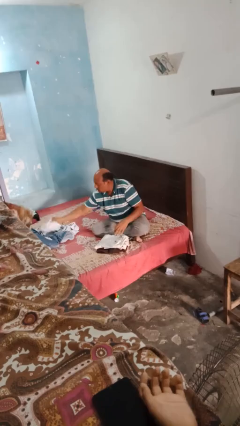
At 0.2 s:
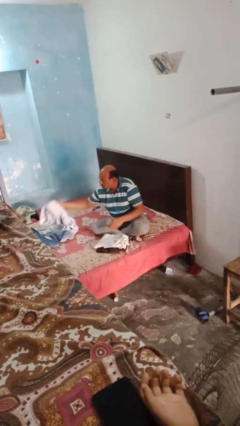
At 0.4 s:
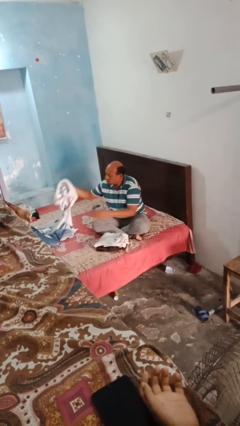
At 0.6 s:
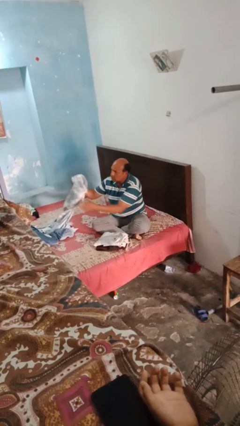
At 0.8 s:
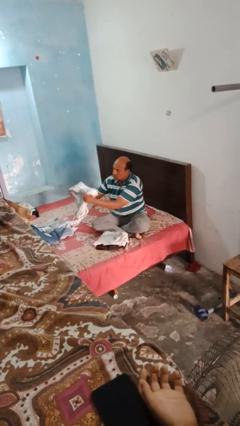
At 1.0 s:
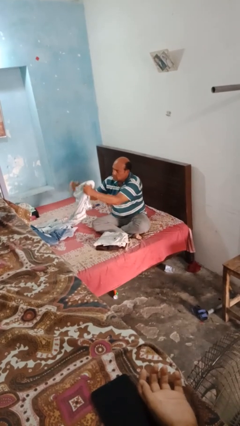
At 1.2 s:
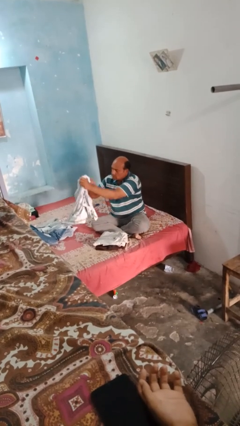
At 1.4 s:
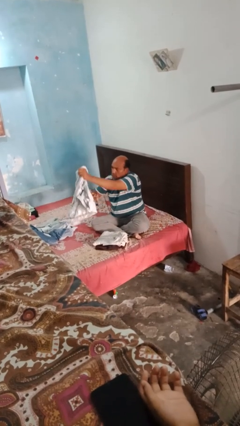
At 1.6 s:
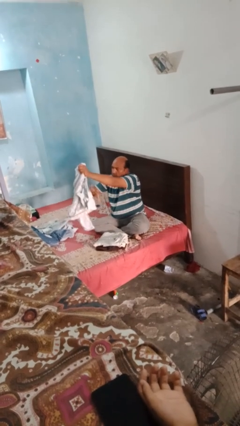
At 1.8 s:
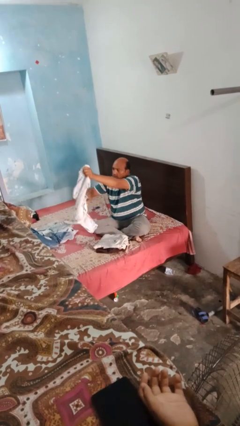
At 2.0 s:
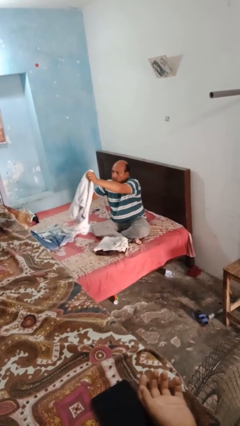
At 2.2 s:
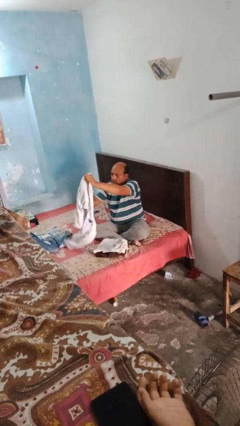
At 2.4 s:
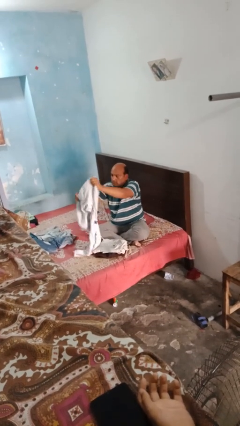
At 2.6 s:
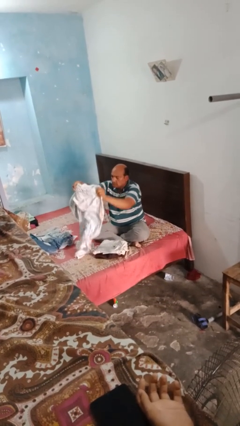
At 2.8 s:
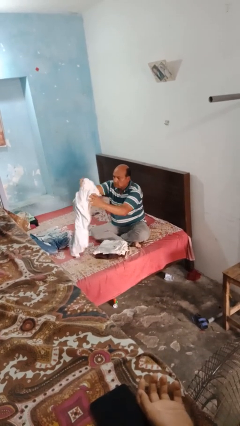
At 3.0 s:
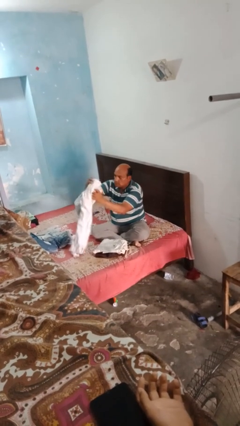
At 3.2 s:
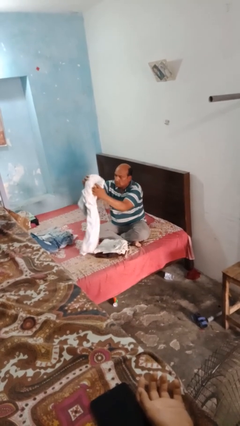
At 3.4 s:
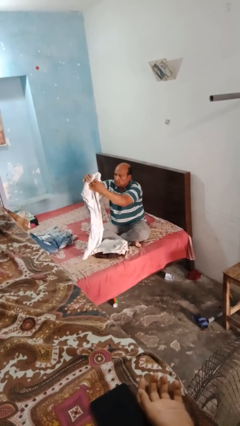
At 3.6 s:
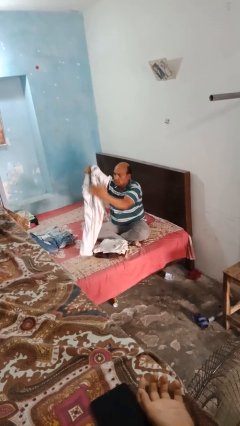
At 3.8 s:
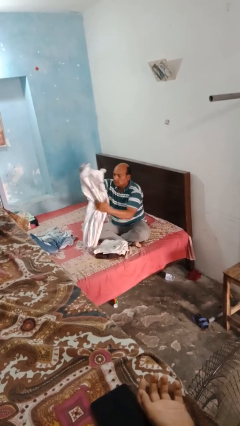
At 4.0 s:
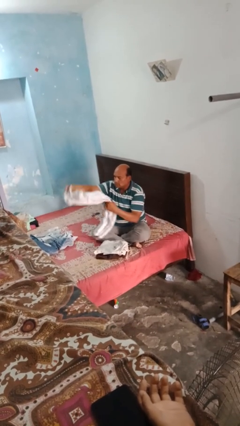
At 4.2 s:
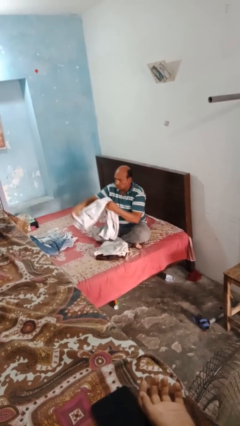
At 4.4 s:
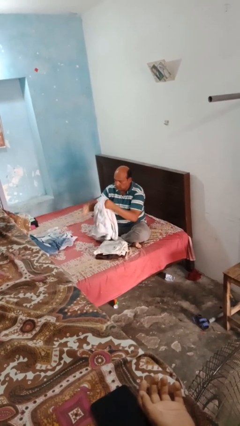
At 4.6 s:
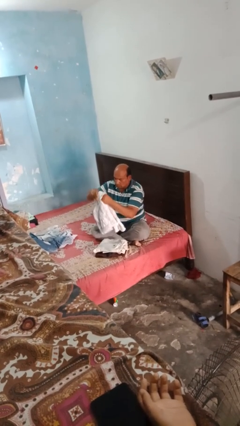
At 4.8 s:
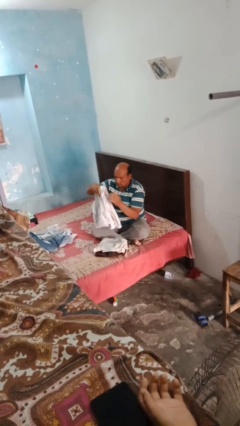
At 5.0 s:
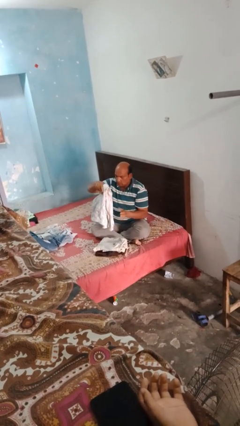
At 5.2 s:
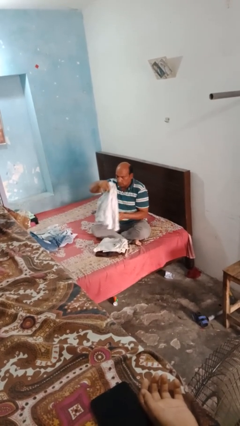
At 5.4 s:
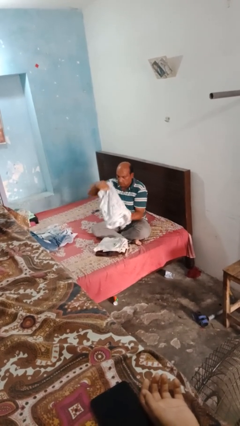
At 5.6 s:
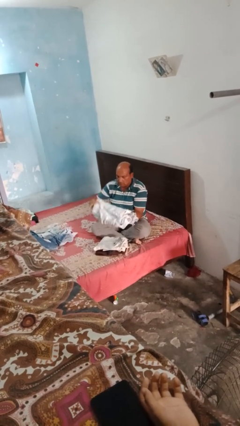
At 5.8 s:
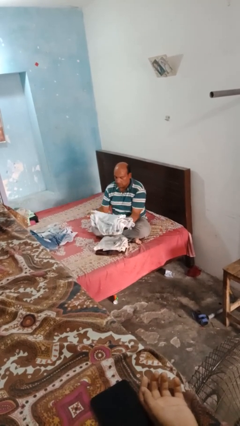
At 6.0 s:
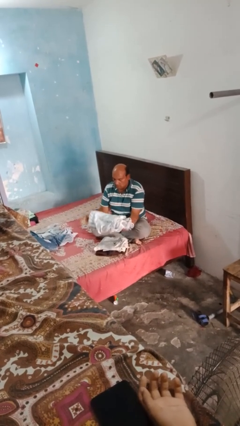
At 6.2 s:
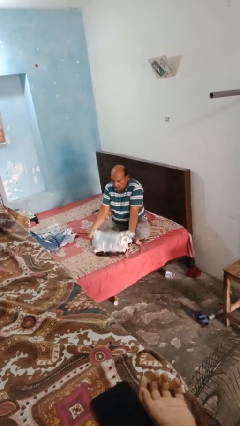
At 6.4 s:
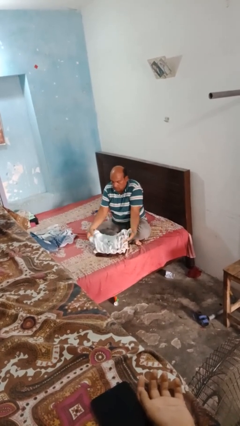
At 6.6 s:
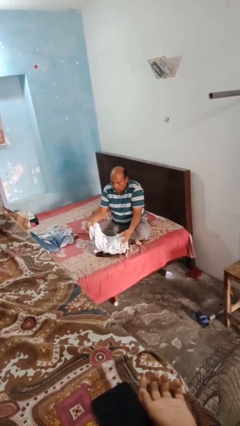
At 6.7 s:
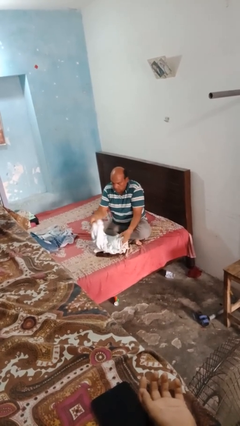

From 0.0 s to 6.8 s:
person folds pants

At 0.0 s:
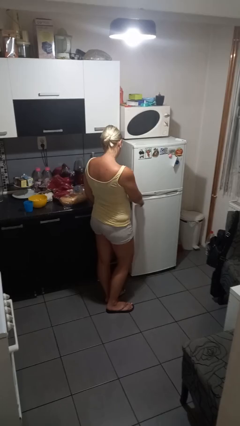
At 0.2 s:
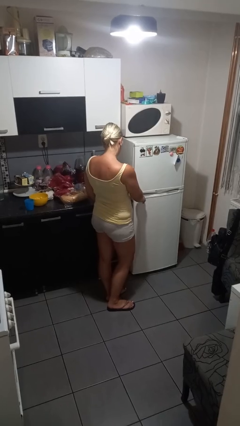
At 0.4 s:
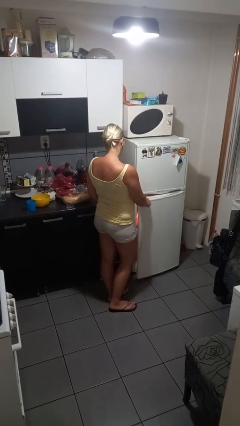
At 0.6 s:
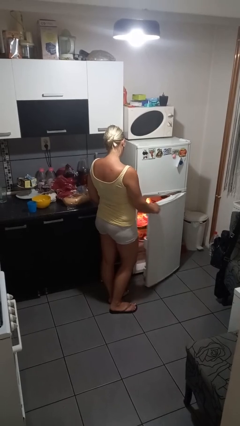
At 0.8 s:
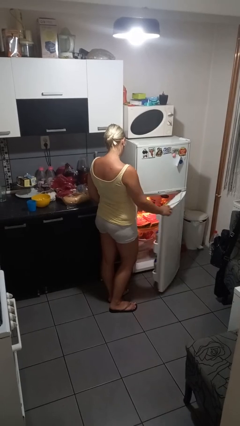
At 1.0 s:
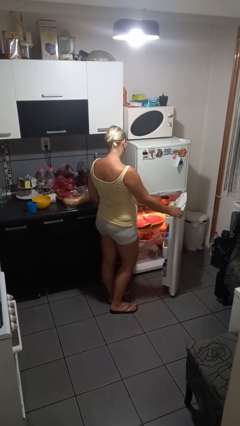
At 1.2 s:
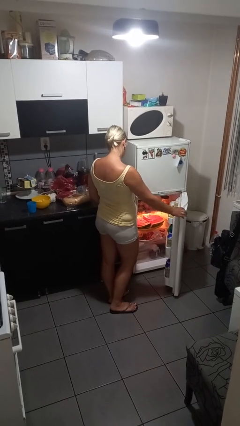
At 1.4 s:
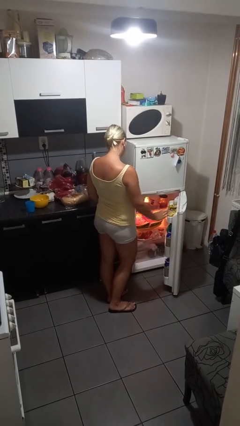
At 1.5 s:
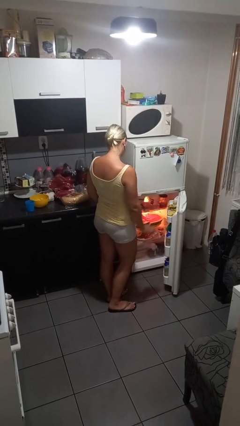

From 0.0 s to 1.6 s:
person opens refrigerator

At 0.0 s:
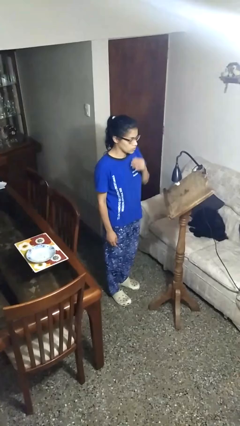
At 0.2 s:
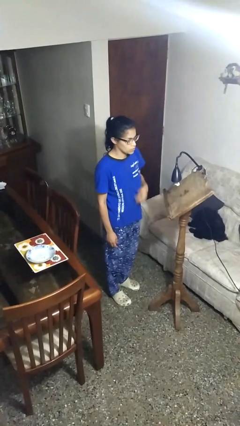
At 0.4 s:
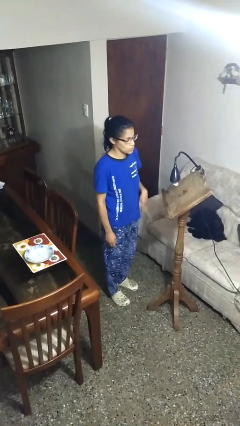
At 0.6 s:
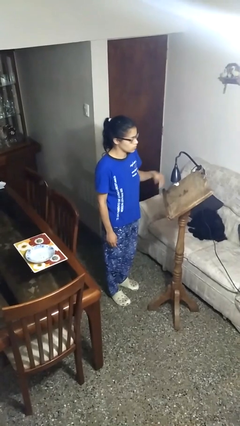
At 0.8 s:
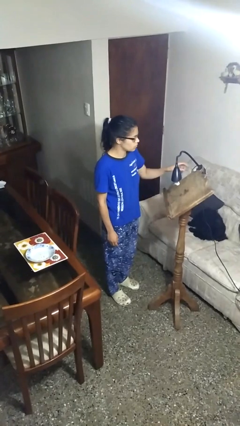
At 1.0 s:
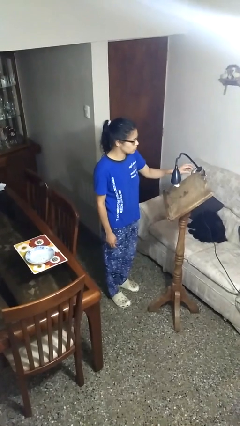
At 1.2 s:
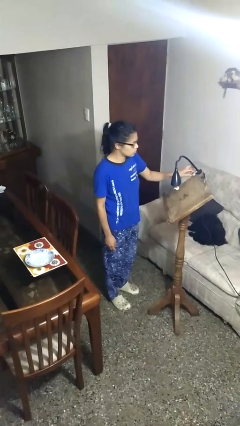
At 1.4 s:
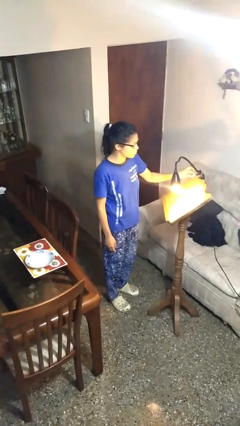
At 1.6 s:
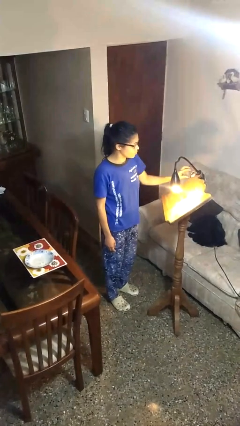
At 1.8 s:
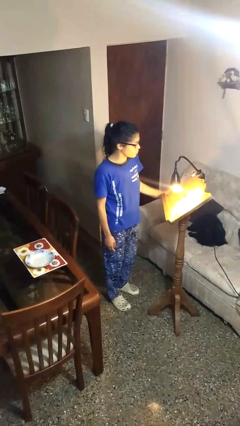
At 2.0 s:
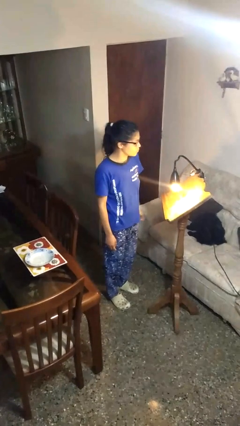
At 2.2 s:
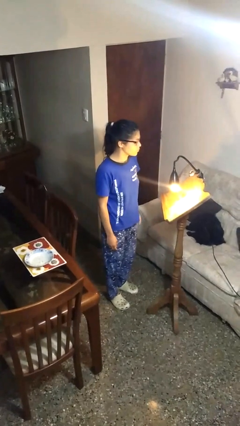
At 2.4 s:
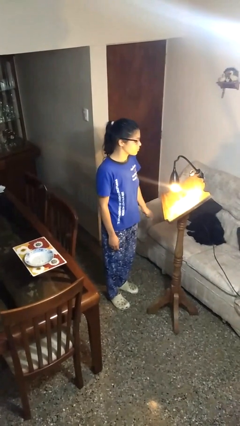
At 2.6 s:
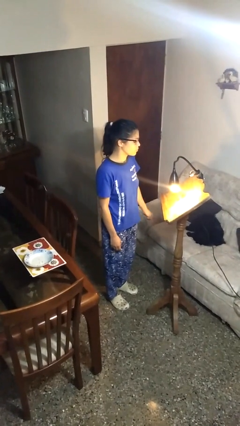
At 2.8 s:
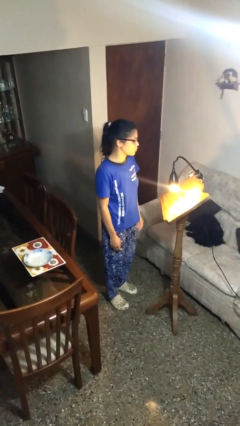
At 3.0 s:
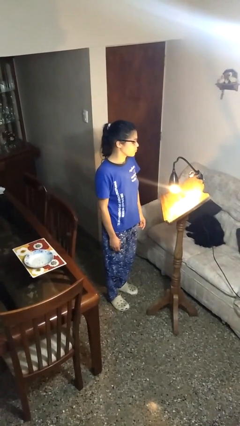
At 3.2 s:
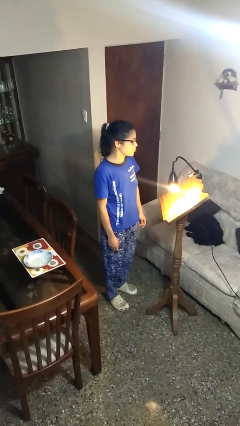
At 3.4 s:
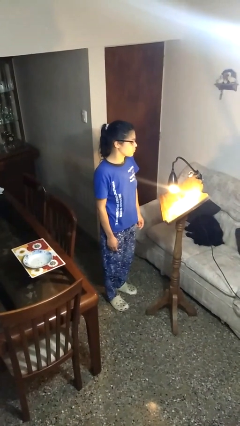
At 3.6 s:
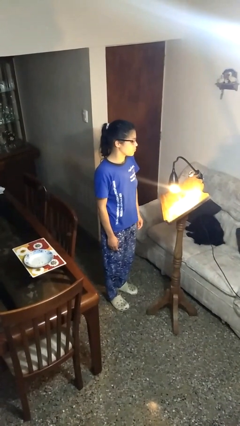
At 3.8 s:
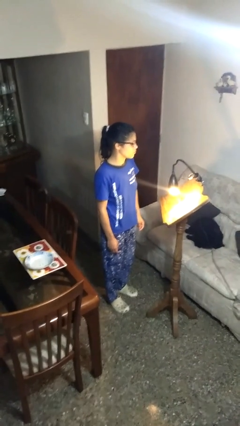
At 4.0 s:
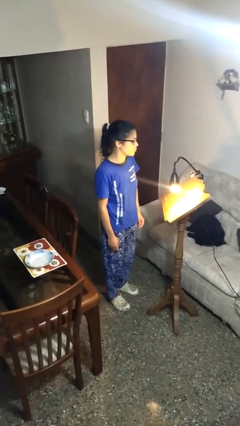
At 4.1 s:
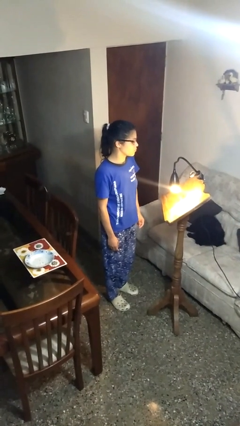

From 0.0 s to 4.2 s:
person turns on lamp

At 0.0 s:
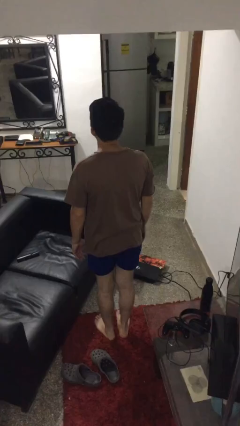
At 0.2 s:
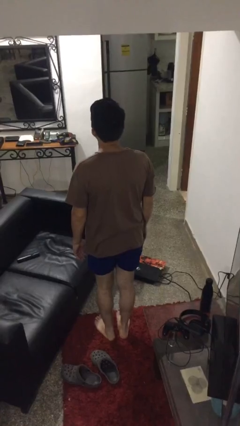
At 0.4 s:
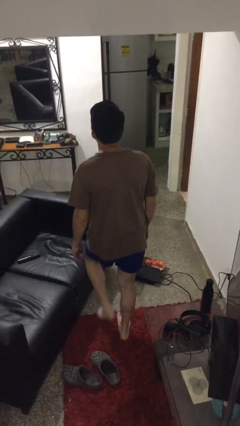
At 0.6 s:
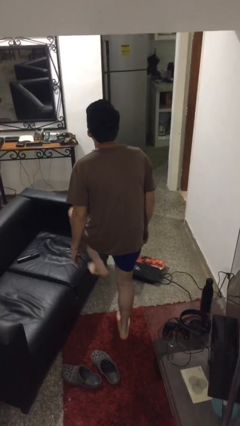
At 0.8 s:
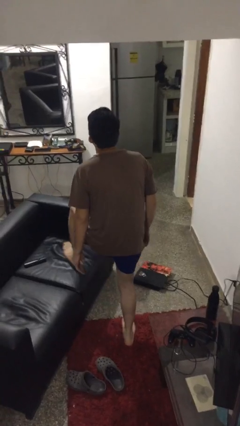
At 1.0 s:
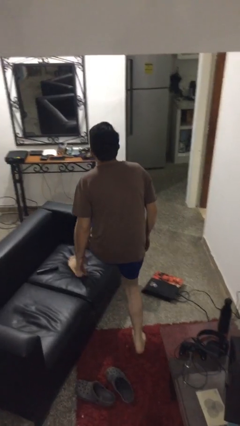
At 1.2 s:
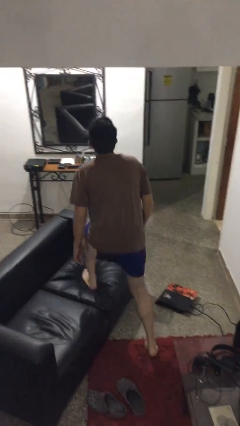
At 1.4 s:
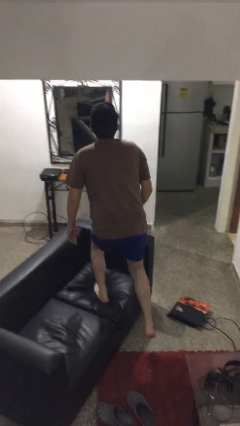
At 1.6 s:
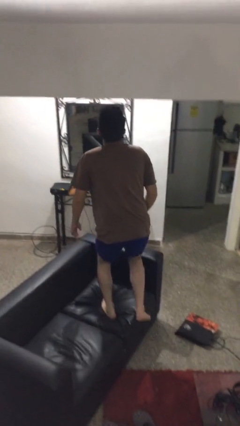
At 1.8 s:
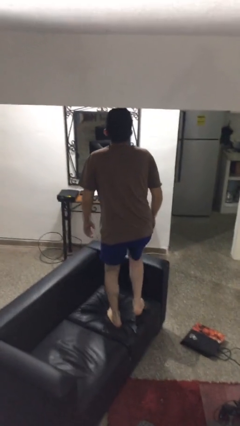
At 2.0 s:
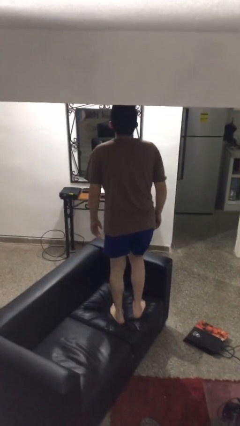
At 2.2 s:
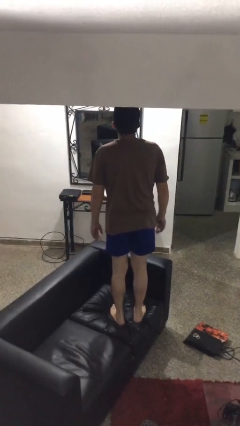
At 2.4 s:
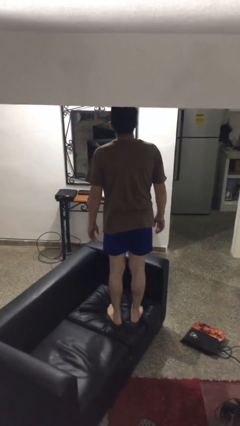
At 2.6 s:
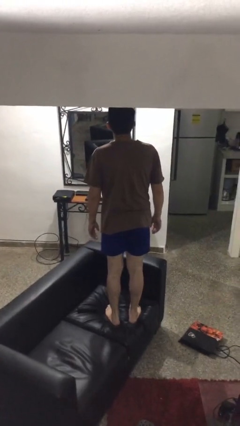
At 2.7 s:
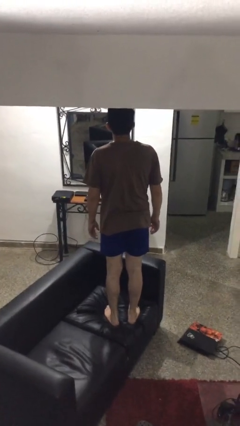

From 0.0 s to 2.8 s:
person climbs on couch

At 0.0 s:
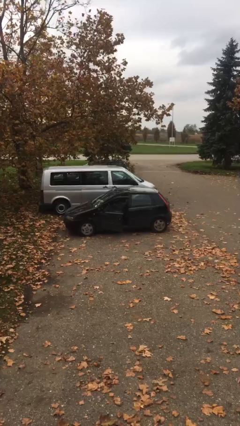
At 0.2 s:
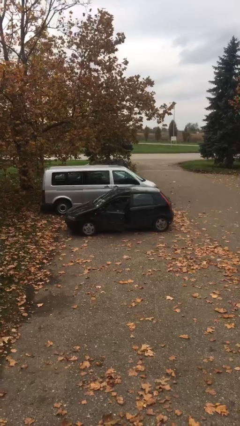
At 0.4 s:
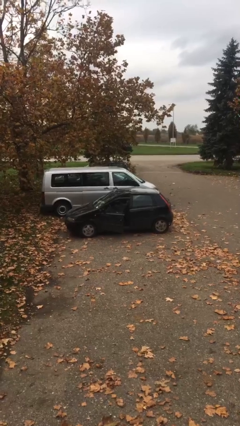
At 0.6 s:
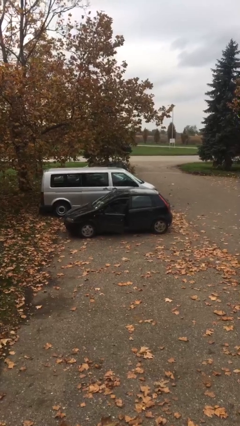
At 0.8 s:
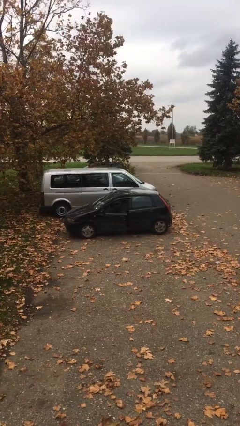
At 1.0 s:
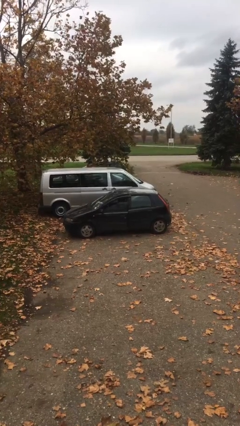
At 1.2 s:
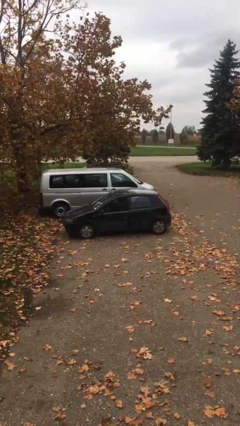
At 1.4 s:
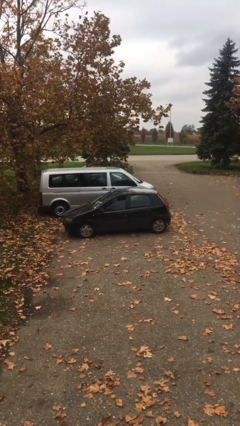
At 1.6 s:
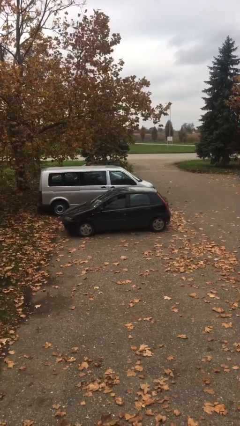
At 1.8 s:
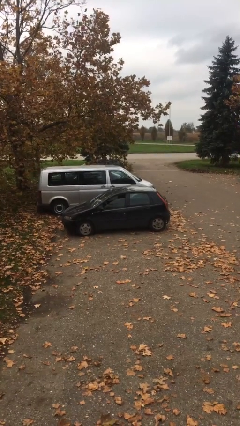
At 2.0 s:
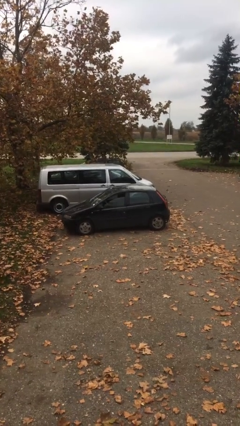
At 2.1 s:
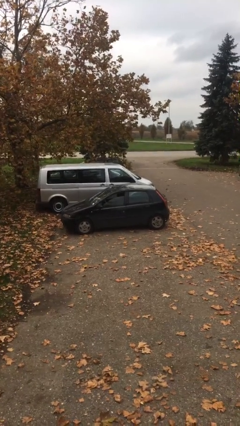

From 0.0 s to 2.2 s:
person closes car door

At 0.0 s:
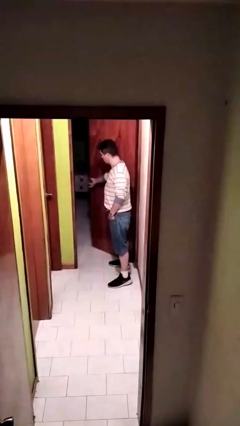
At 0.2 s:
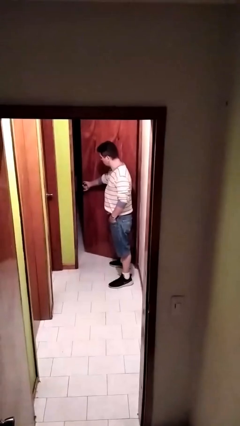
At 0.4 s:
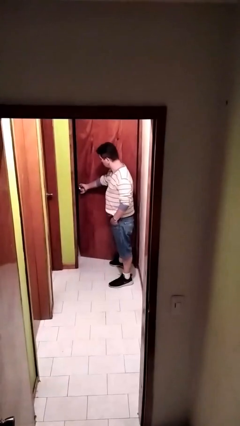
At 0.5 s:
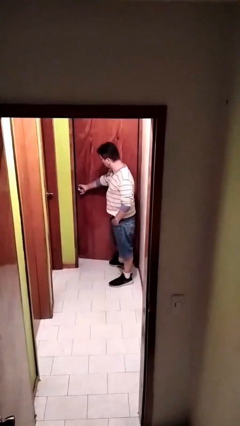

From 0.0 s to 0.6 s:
person closes facility door
